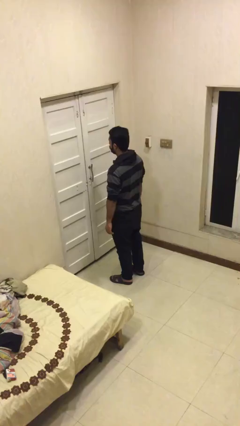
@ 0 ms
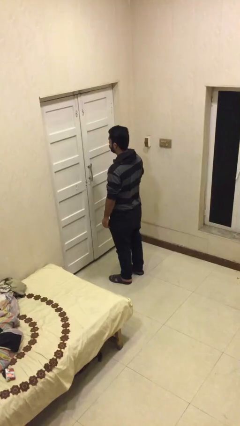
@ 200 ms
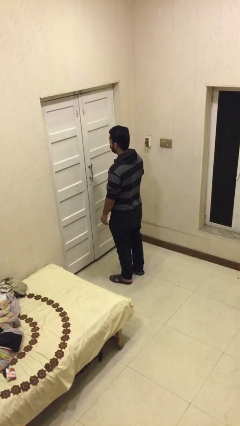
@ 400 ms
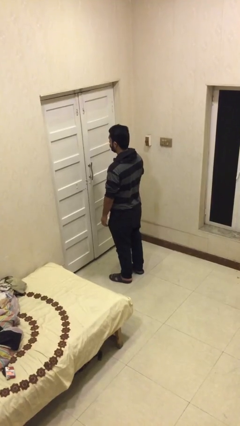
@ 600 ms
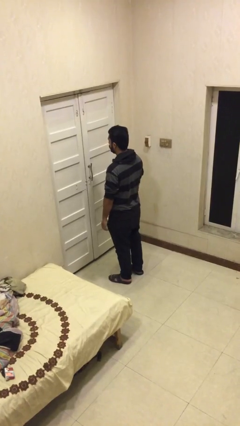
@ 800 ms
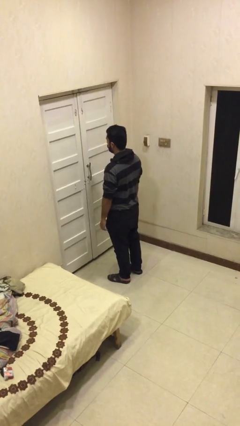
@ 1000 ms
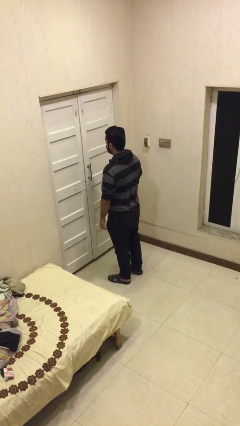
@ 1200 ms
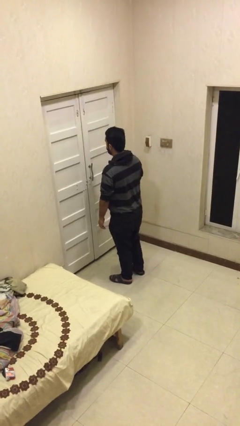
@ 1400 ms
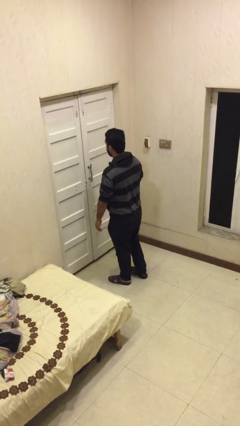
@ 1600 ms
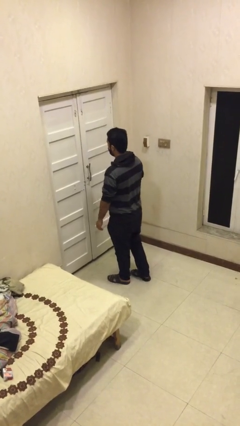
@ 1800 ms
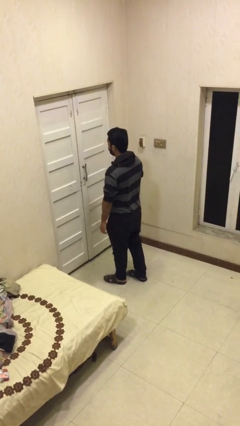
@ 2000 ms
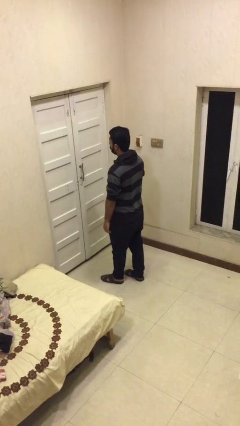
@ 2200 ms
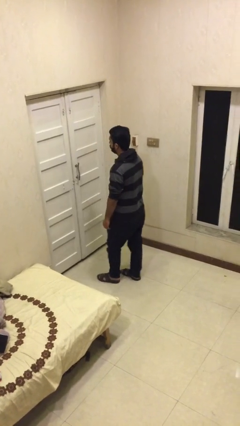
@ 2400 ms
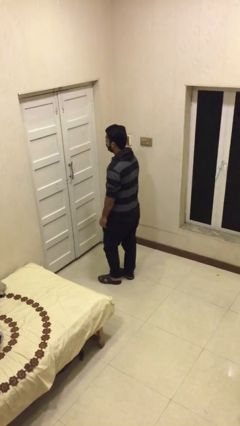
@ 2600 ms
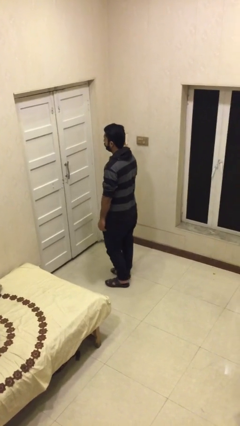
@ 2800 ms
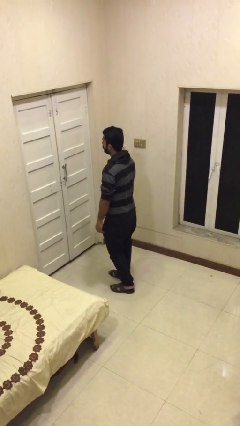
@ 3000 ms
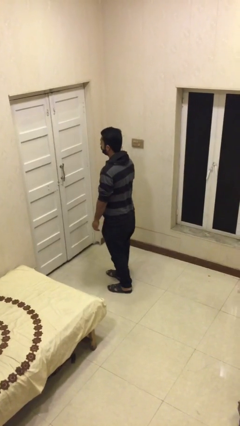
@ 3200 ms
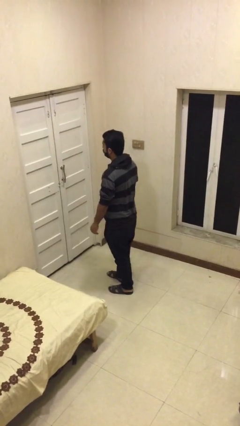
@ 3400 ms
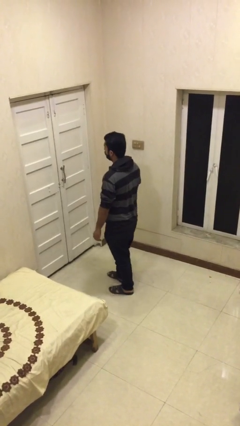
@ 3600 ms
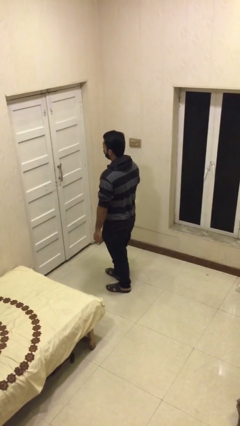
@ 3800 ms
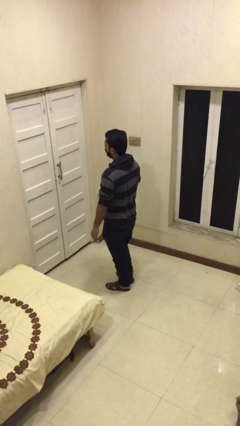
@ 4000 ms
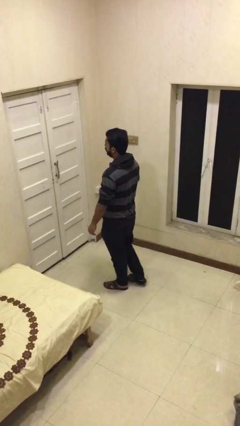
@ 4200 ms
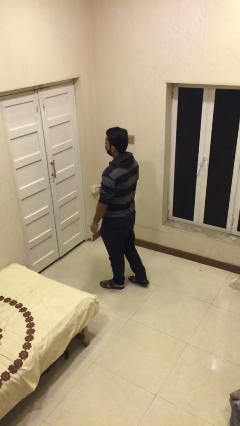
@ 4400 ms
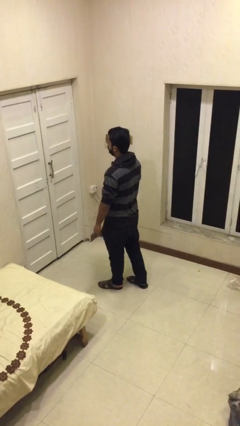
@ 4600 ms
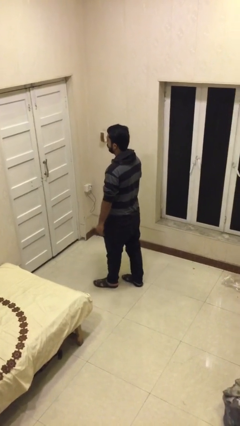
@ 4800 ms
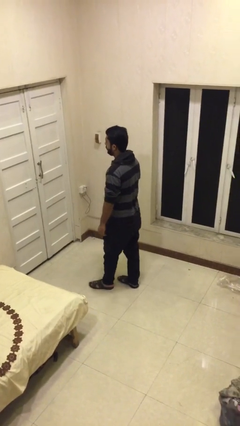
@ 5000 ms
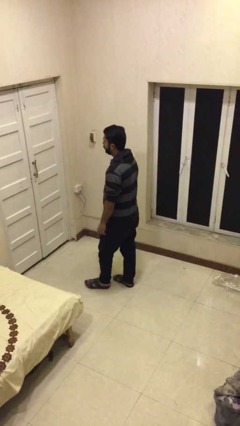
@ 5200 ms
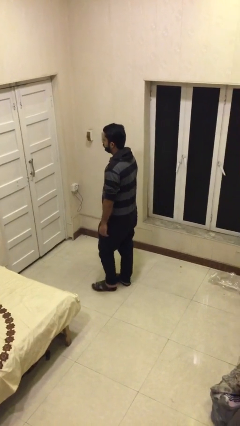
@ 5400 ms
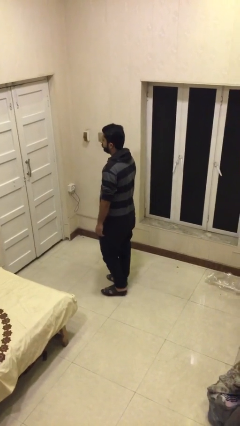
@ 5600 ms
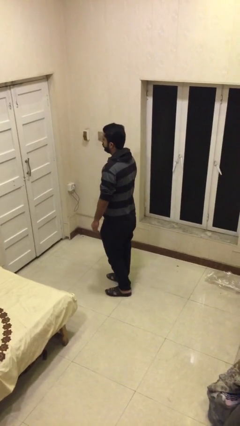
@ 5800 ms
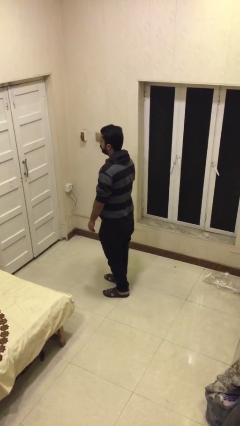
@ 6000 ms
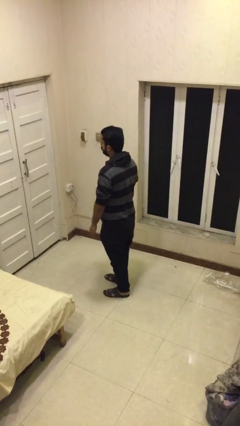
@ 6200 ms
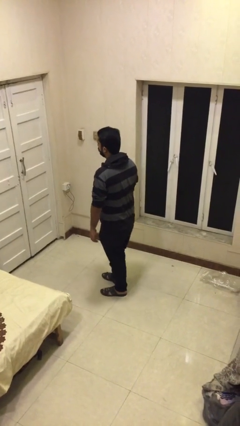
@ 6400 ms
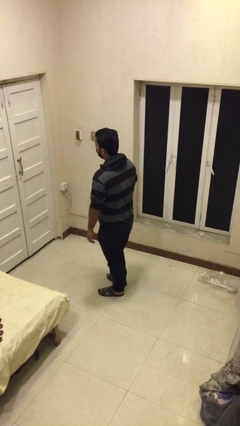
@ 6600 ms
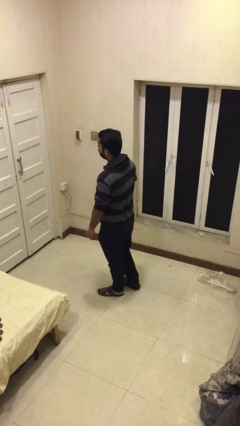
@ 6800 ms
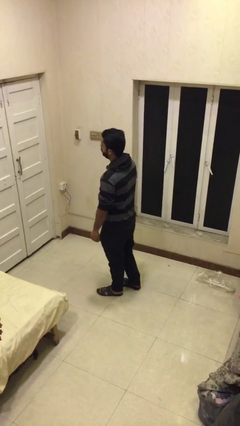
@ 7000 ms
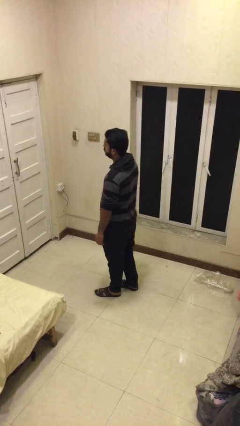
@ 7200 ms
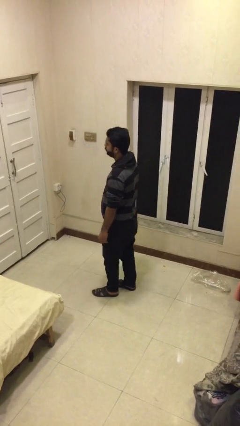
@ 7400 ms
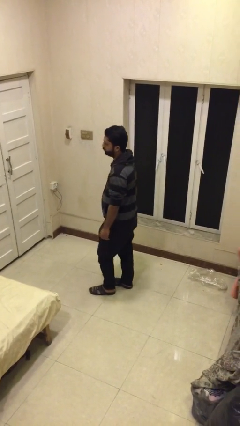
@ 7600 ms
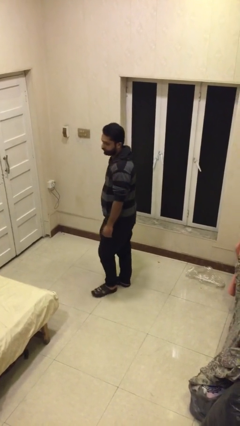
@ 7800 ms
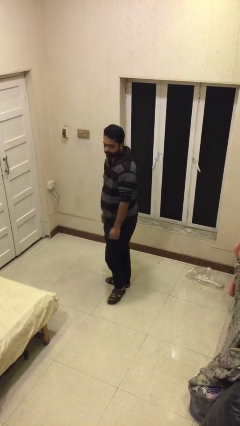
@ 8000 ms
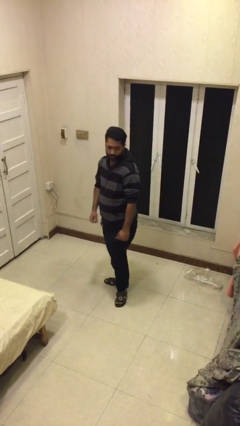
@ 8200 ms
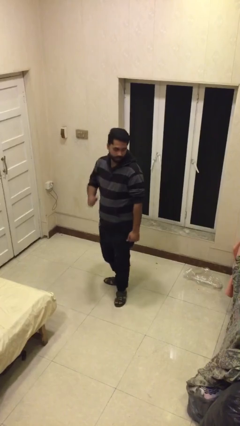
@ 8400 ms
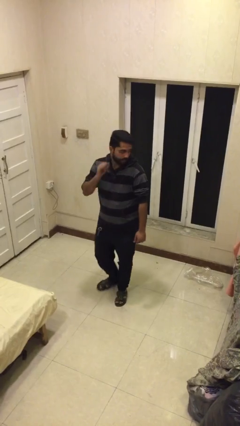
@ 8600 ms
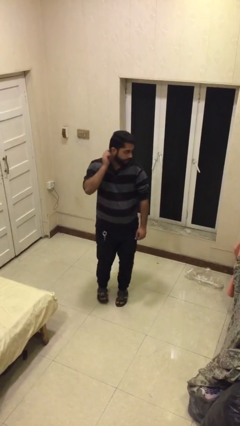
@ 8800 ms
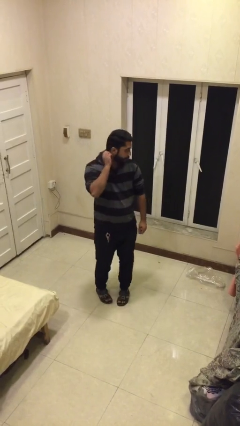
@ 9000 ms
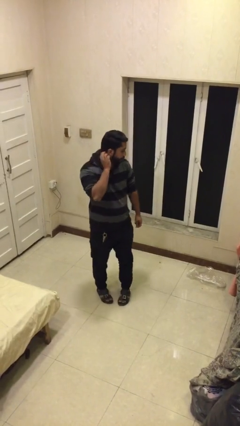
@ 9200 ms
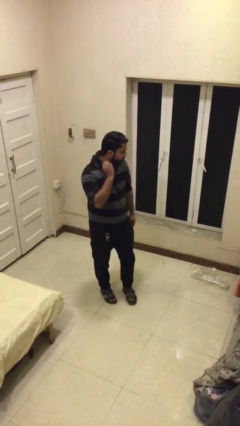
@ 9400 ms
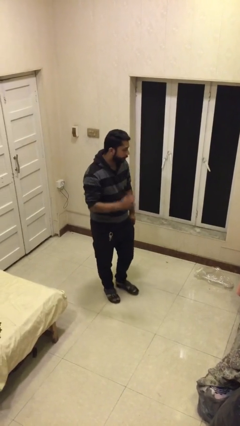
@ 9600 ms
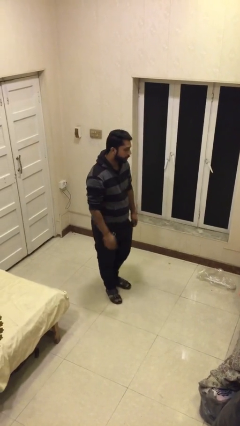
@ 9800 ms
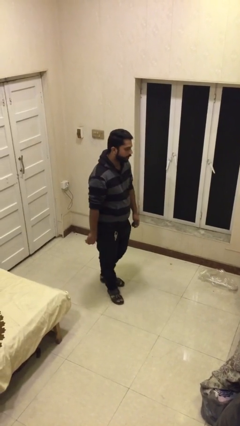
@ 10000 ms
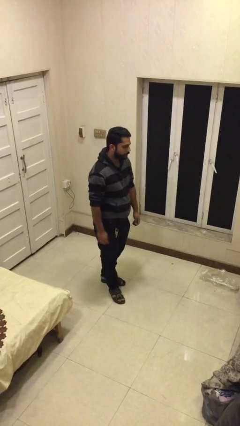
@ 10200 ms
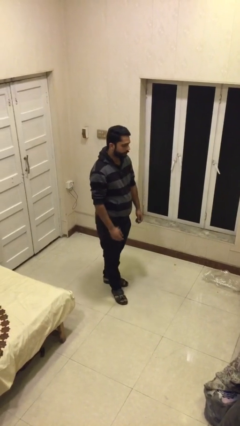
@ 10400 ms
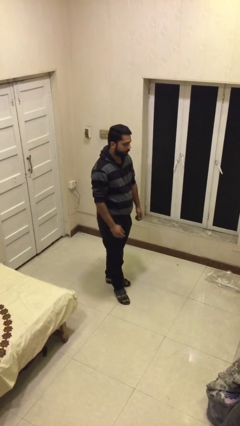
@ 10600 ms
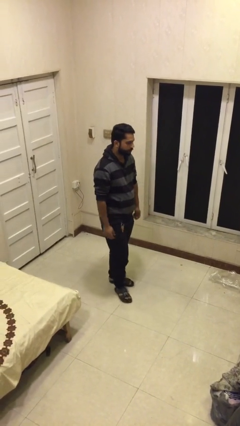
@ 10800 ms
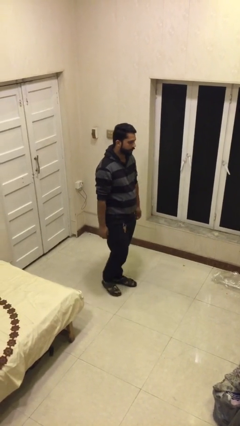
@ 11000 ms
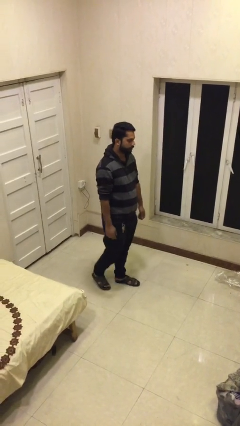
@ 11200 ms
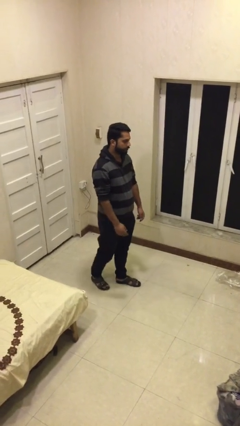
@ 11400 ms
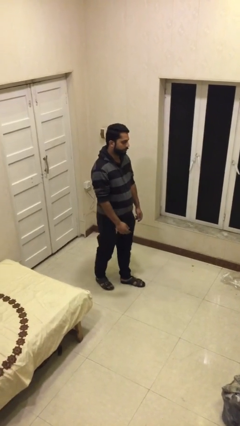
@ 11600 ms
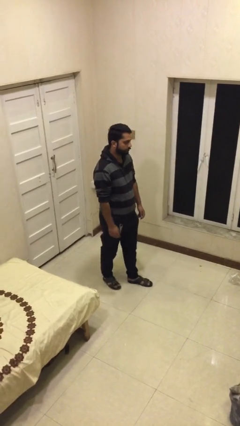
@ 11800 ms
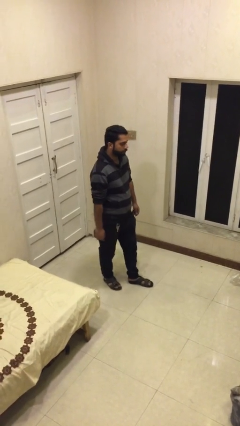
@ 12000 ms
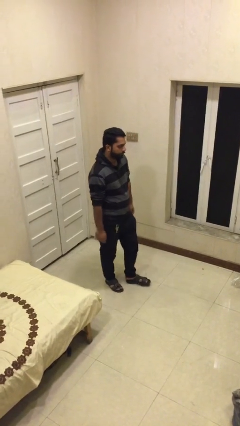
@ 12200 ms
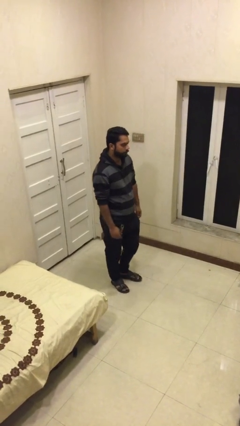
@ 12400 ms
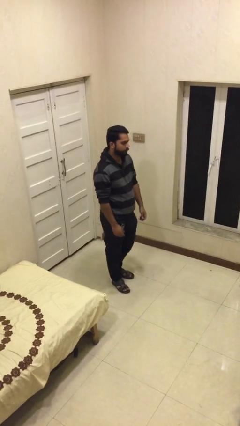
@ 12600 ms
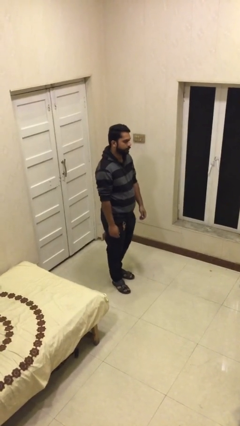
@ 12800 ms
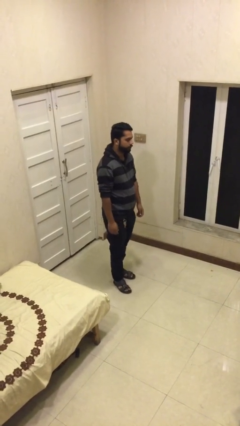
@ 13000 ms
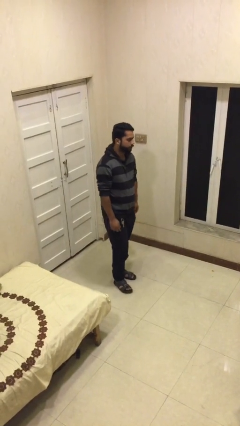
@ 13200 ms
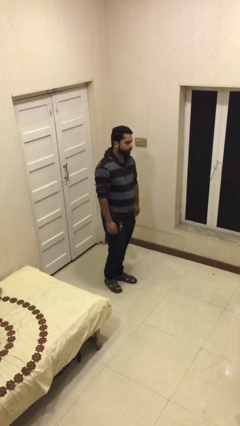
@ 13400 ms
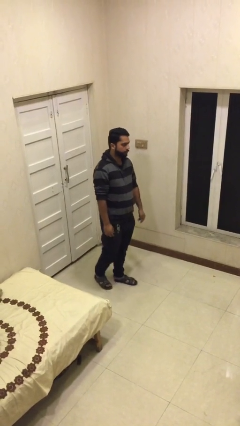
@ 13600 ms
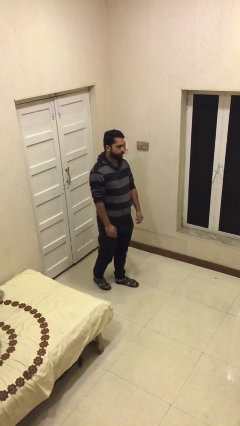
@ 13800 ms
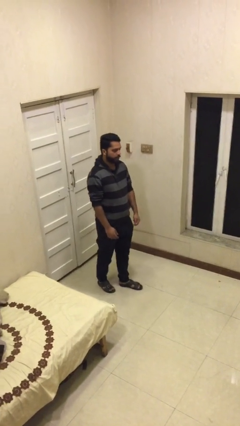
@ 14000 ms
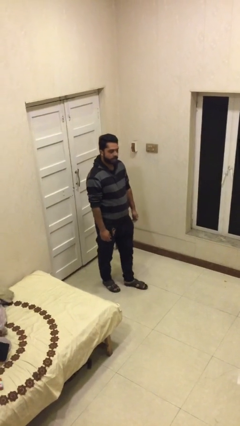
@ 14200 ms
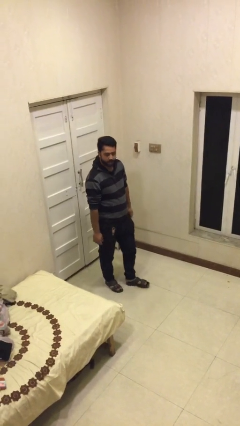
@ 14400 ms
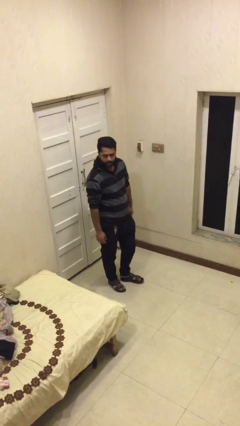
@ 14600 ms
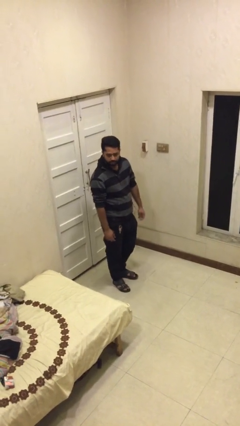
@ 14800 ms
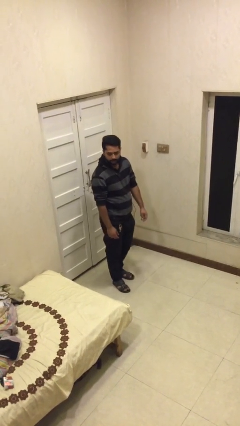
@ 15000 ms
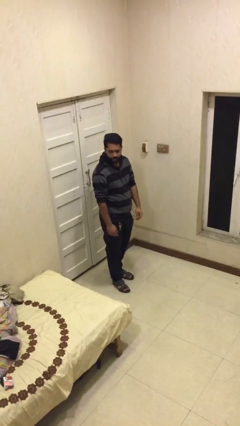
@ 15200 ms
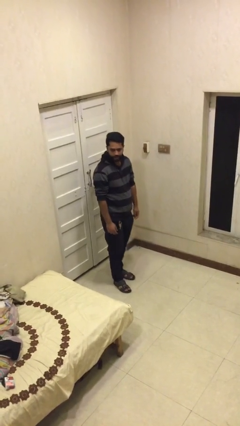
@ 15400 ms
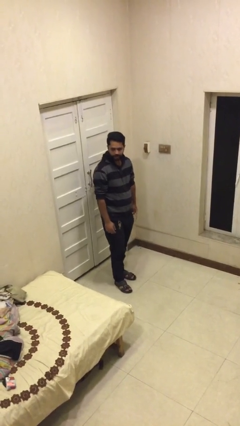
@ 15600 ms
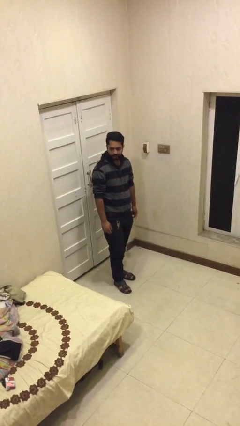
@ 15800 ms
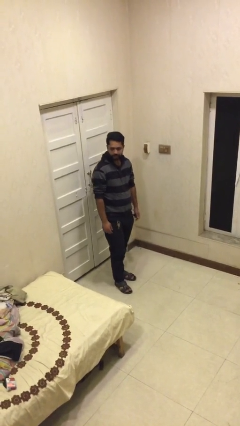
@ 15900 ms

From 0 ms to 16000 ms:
person walks

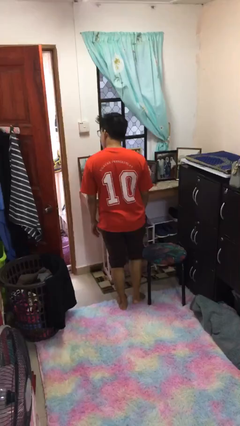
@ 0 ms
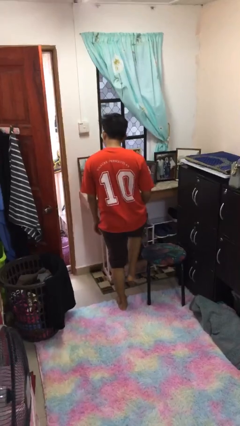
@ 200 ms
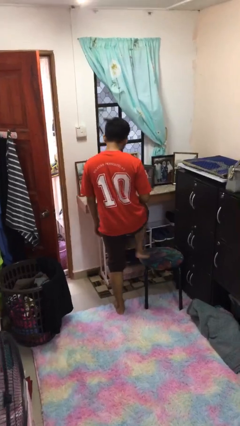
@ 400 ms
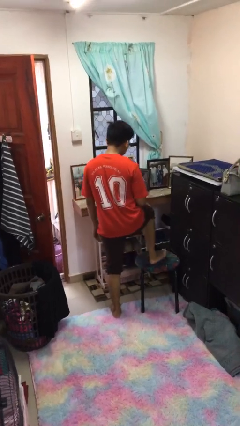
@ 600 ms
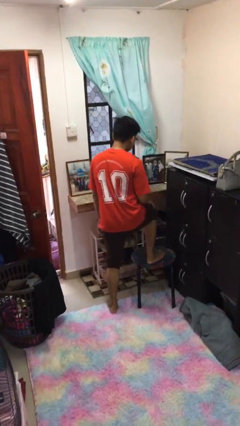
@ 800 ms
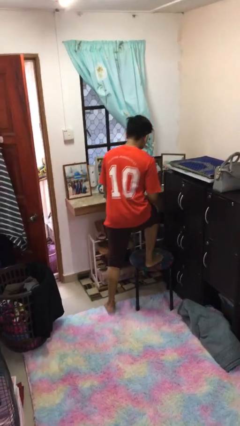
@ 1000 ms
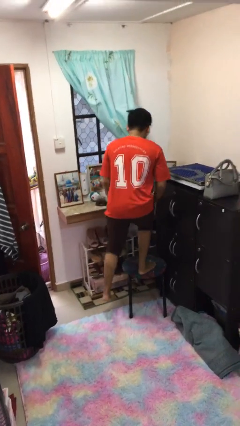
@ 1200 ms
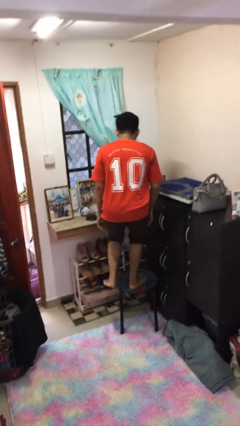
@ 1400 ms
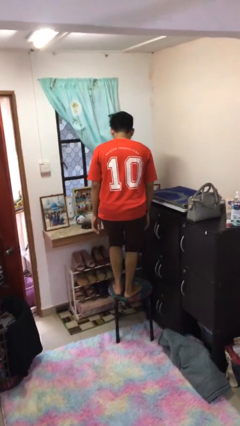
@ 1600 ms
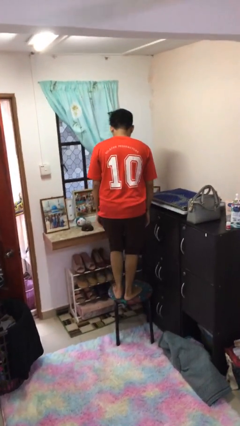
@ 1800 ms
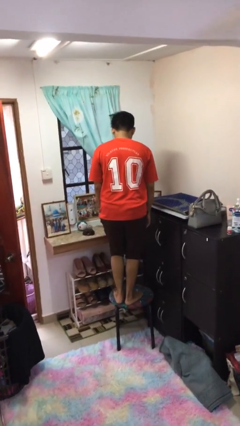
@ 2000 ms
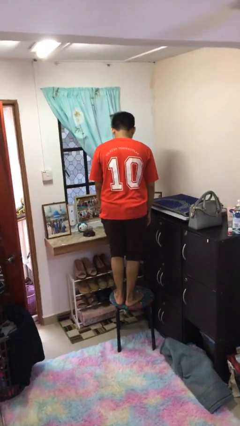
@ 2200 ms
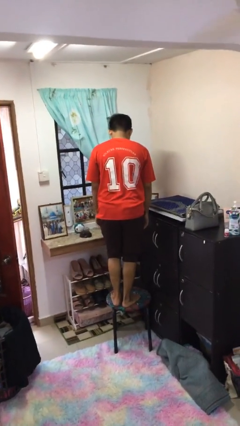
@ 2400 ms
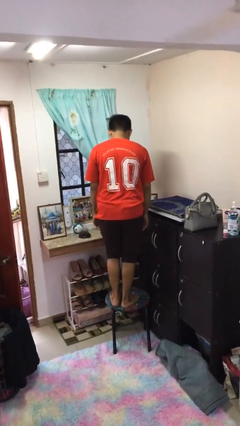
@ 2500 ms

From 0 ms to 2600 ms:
person climbs on chair
